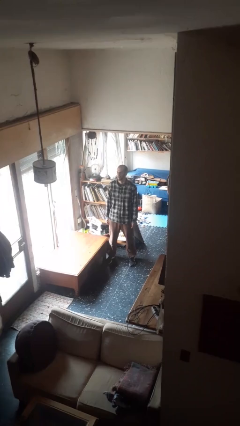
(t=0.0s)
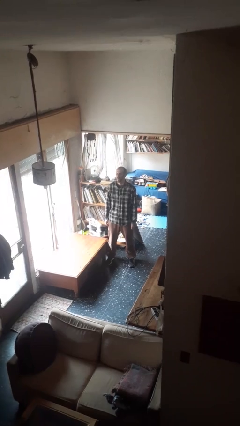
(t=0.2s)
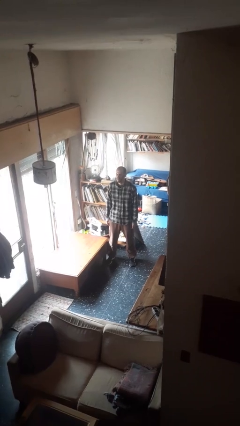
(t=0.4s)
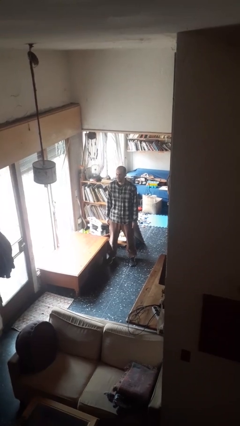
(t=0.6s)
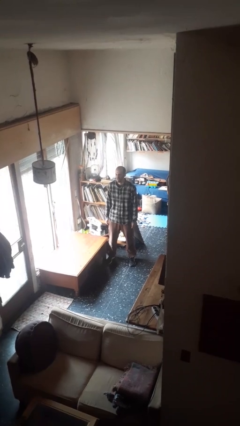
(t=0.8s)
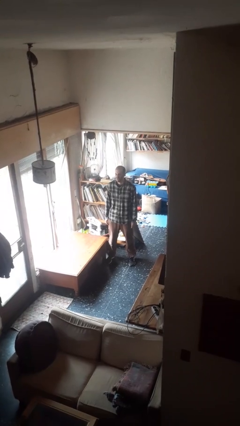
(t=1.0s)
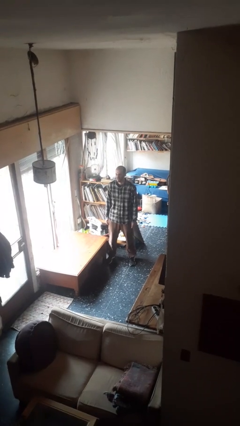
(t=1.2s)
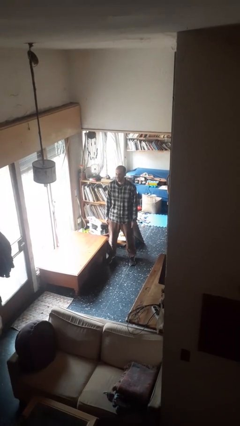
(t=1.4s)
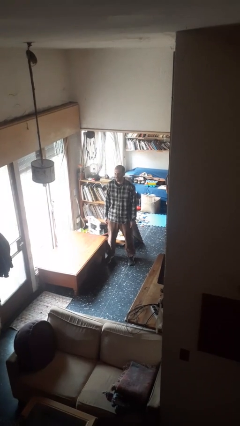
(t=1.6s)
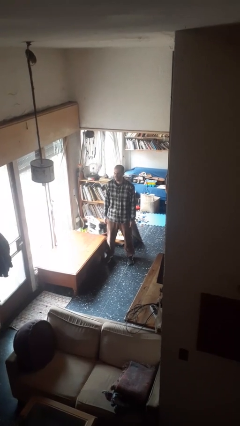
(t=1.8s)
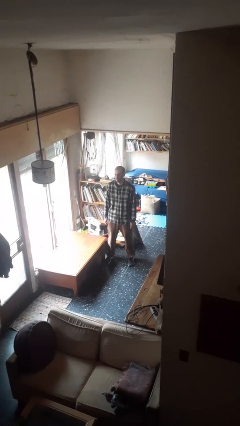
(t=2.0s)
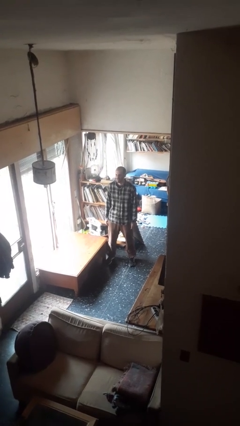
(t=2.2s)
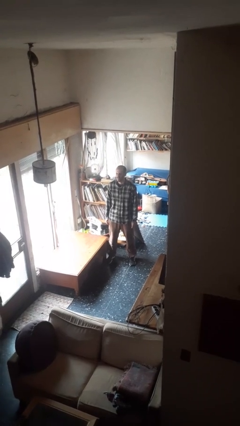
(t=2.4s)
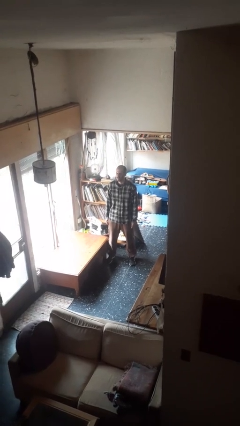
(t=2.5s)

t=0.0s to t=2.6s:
person sticks out tongue

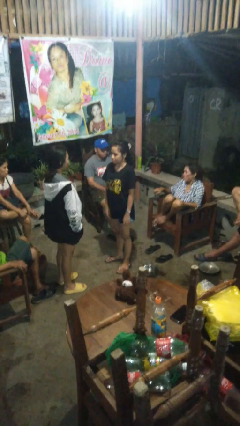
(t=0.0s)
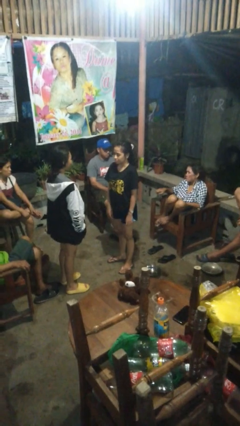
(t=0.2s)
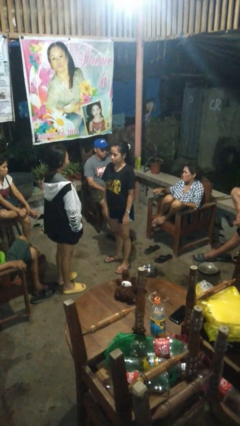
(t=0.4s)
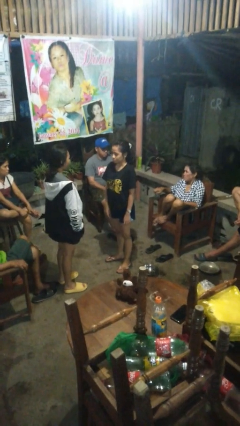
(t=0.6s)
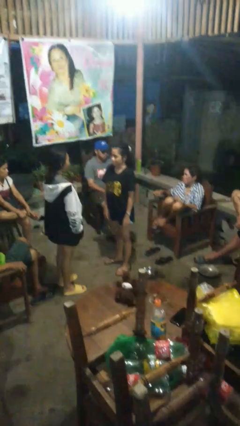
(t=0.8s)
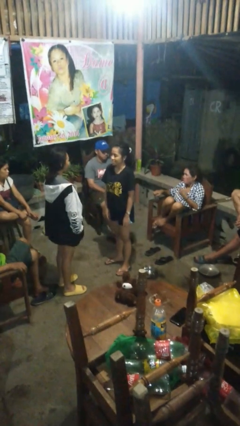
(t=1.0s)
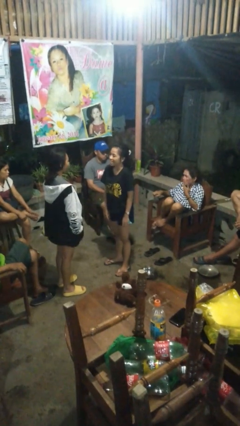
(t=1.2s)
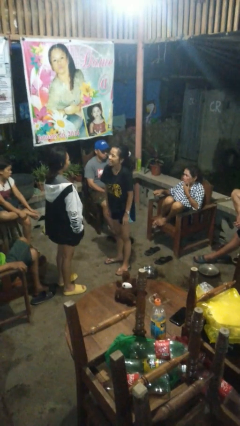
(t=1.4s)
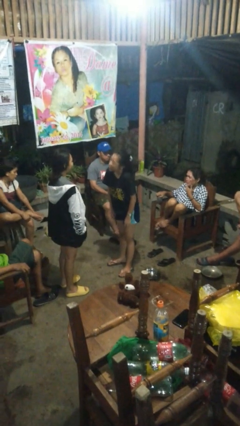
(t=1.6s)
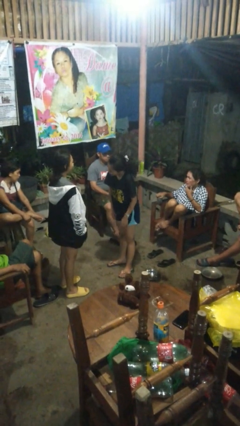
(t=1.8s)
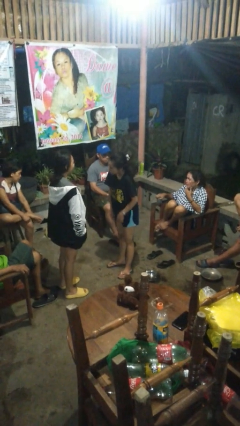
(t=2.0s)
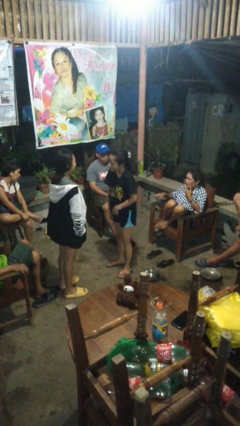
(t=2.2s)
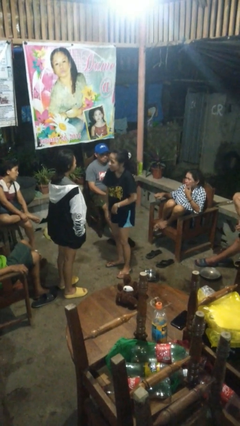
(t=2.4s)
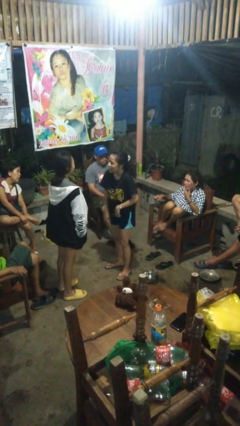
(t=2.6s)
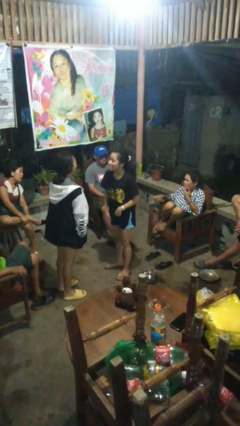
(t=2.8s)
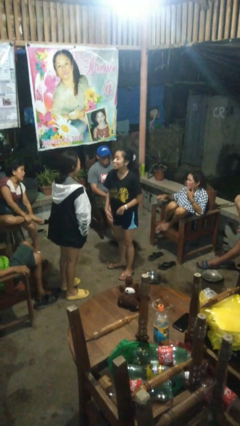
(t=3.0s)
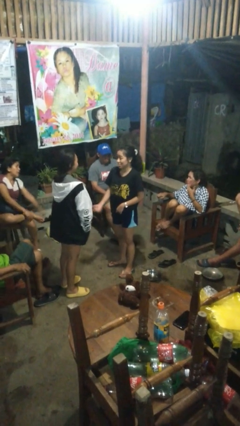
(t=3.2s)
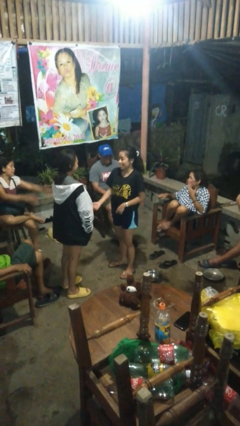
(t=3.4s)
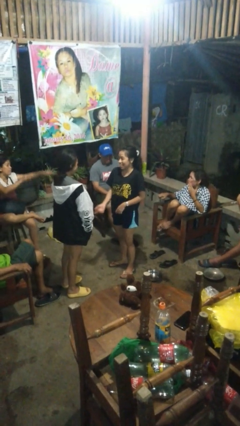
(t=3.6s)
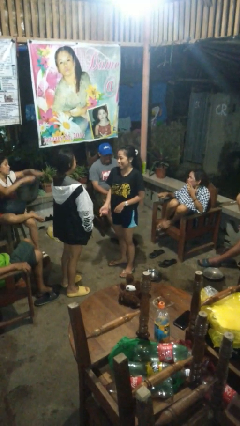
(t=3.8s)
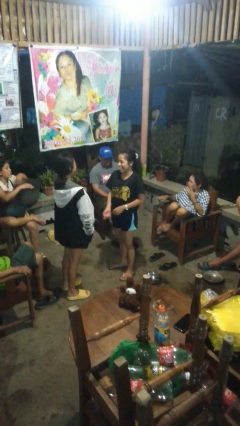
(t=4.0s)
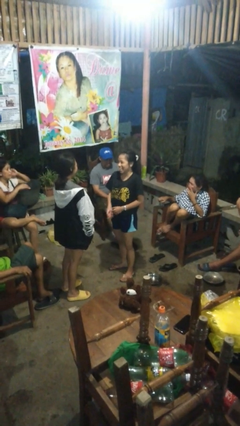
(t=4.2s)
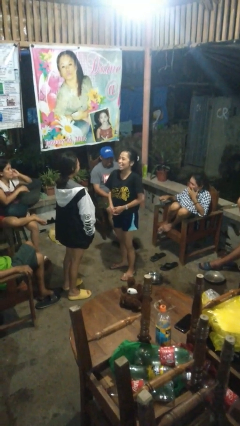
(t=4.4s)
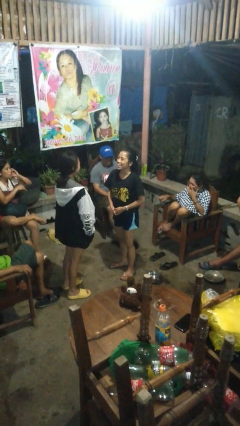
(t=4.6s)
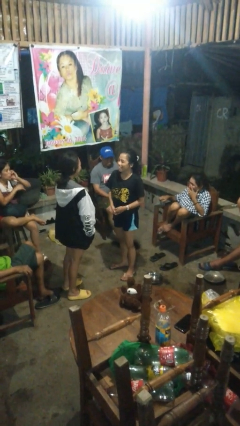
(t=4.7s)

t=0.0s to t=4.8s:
person laughs with person

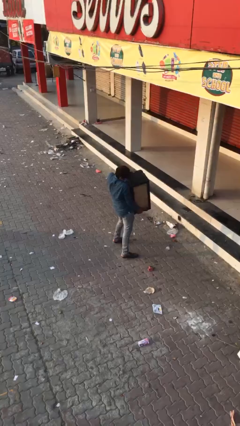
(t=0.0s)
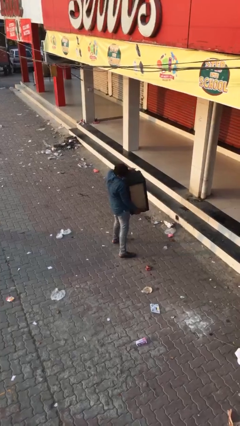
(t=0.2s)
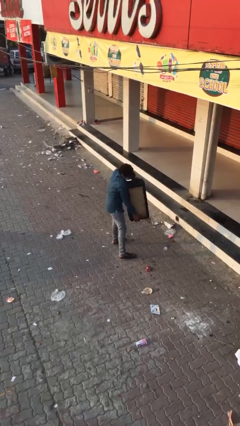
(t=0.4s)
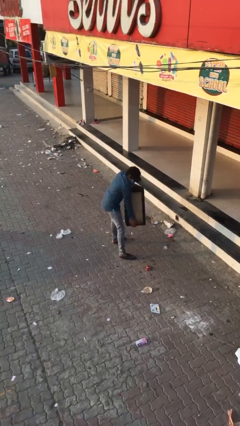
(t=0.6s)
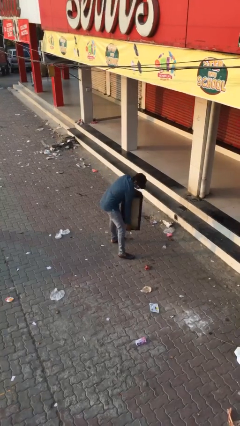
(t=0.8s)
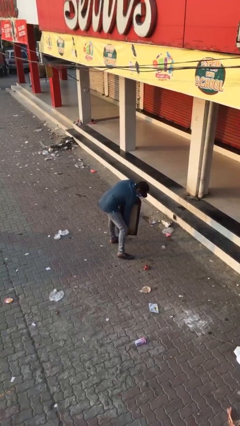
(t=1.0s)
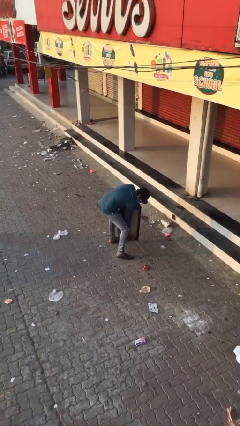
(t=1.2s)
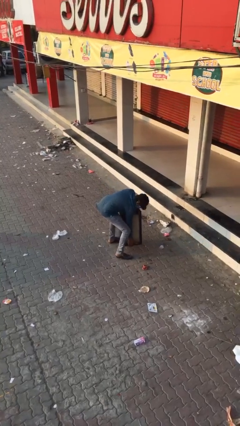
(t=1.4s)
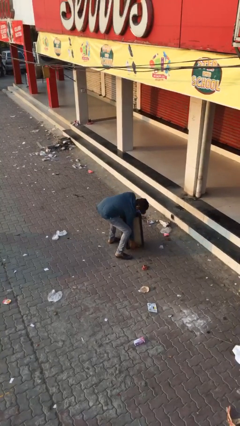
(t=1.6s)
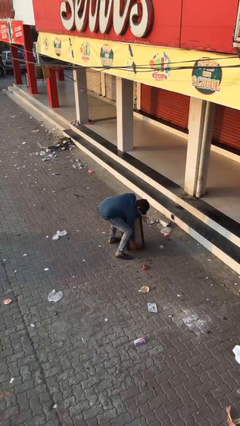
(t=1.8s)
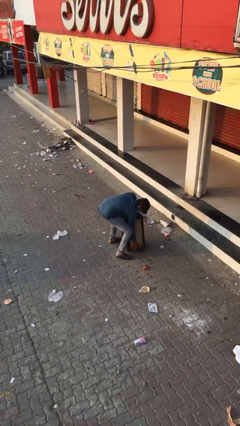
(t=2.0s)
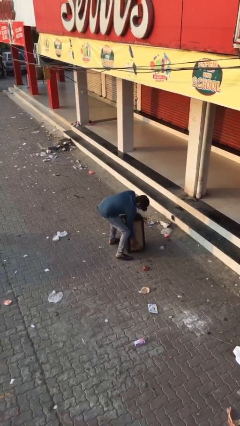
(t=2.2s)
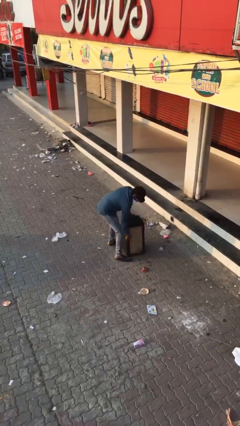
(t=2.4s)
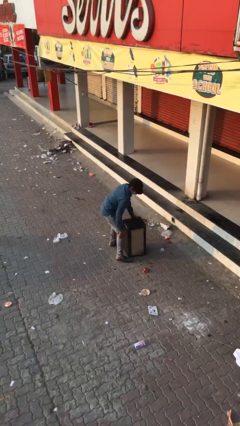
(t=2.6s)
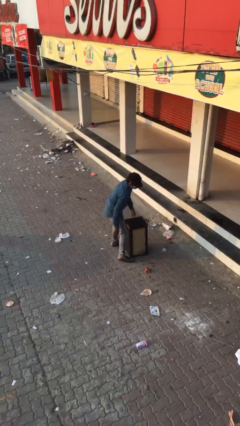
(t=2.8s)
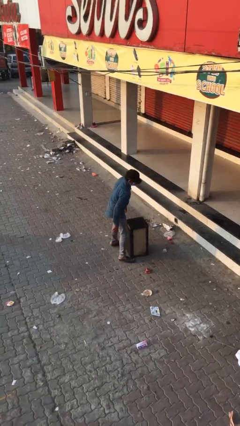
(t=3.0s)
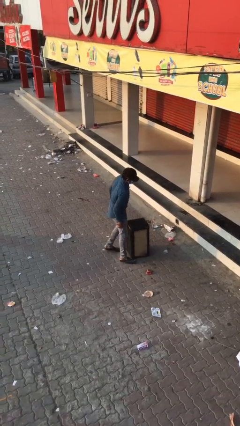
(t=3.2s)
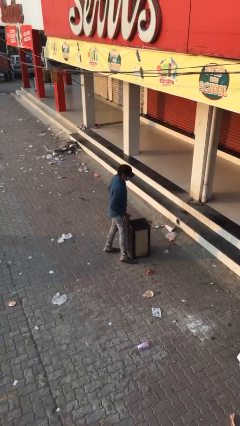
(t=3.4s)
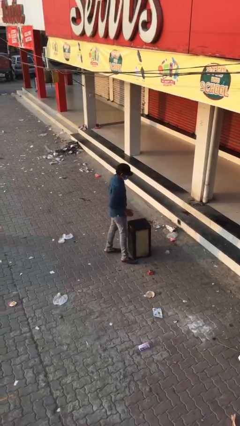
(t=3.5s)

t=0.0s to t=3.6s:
person puts down object on floor

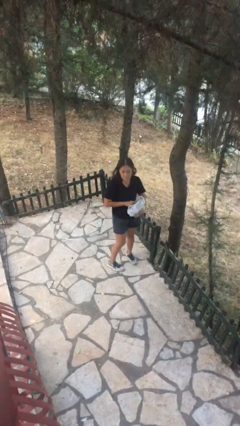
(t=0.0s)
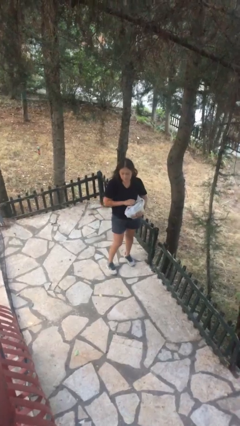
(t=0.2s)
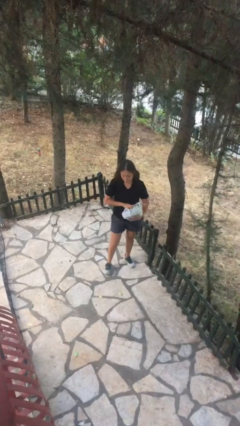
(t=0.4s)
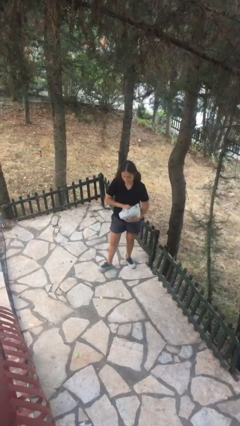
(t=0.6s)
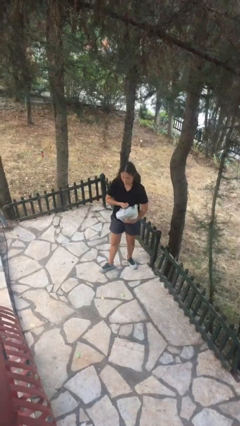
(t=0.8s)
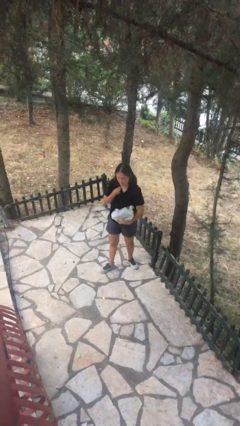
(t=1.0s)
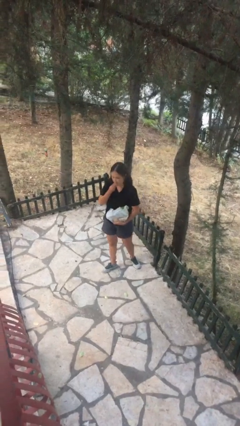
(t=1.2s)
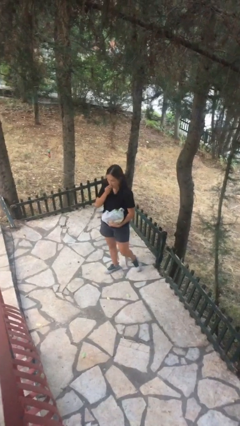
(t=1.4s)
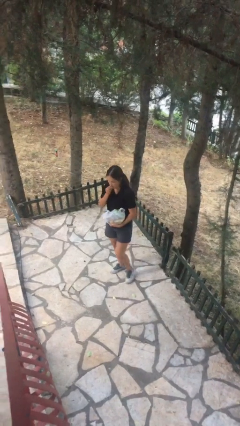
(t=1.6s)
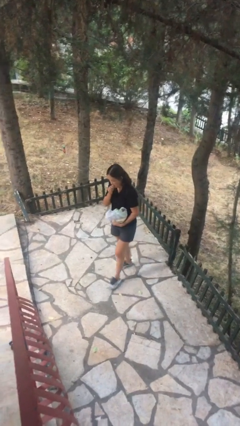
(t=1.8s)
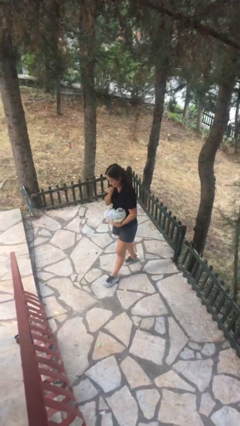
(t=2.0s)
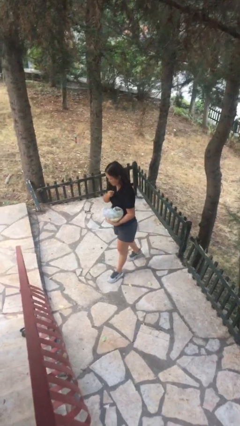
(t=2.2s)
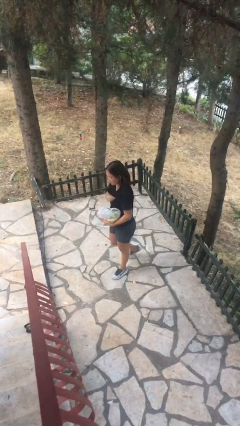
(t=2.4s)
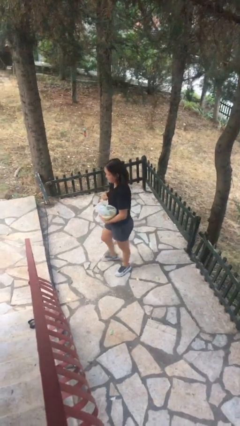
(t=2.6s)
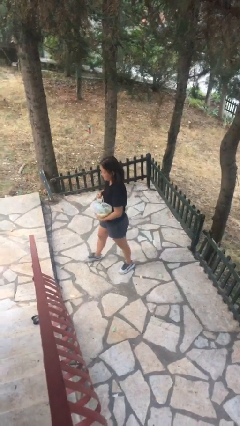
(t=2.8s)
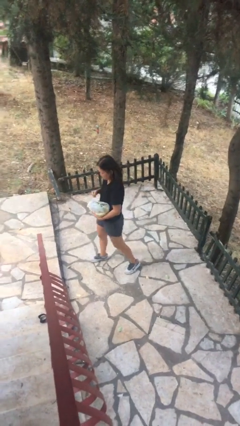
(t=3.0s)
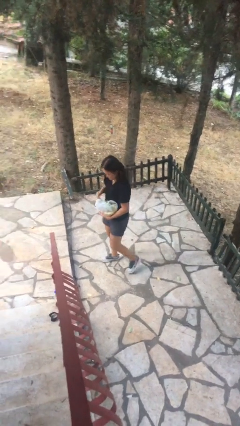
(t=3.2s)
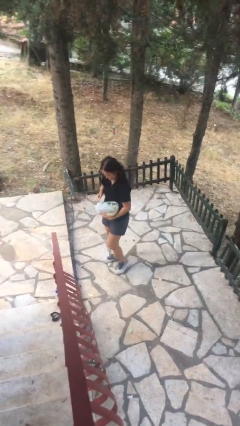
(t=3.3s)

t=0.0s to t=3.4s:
person eats snack from bag

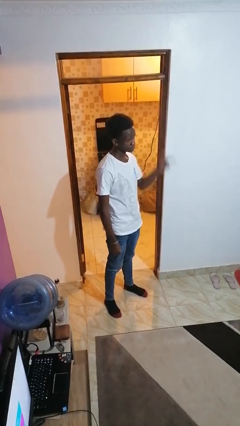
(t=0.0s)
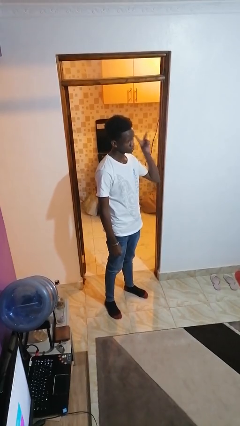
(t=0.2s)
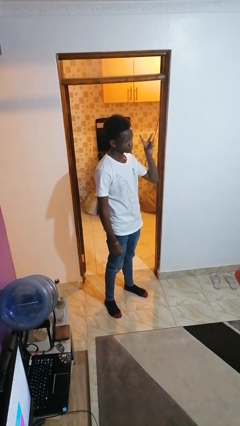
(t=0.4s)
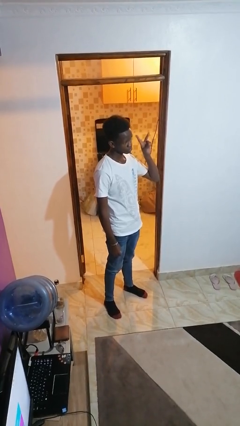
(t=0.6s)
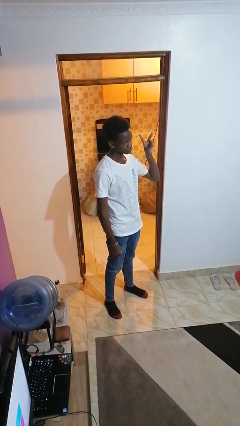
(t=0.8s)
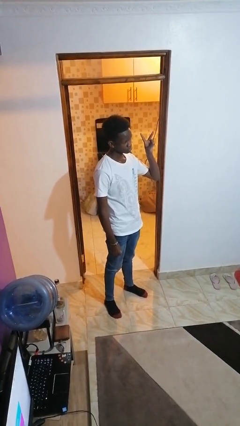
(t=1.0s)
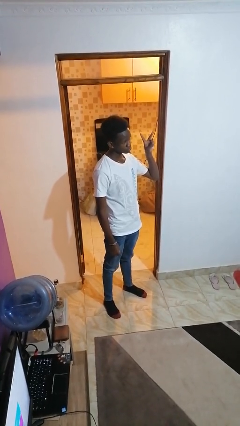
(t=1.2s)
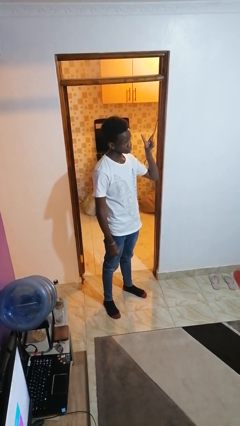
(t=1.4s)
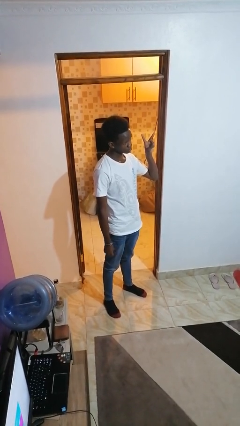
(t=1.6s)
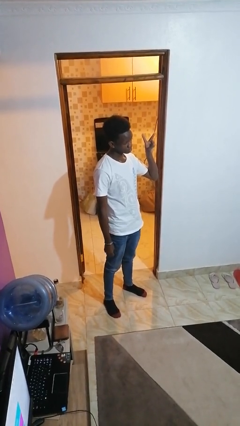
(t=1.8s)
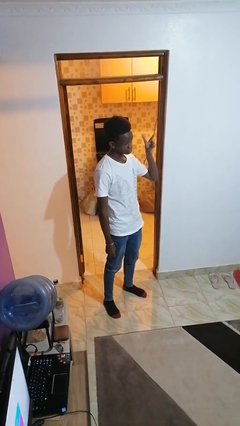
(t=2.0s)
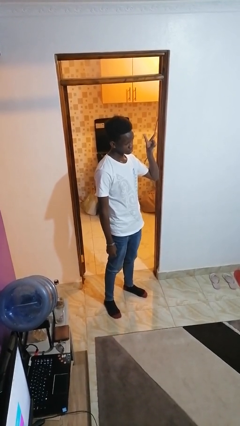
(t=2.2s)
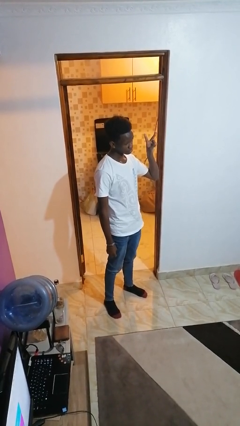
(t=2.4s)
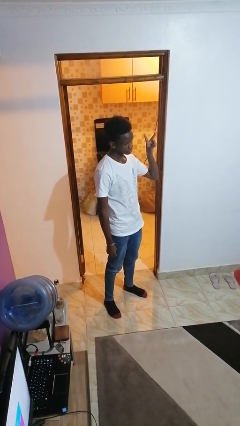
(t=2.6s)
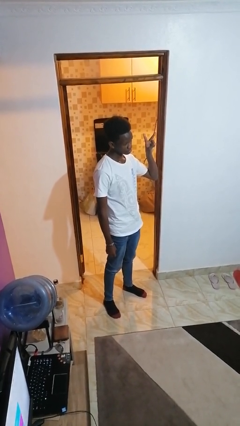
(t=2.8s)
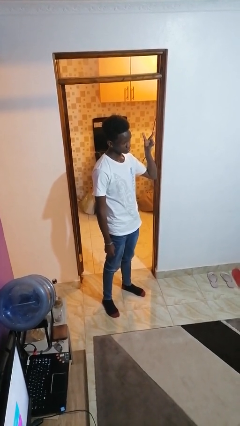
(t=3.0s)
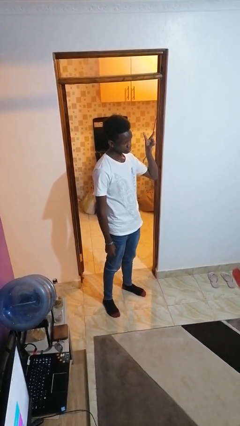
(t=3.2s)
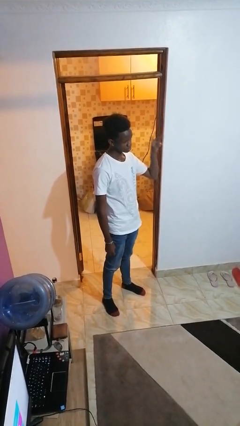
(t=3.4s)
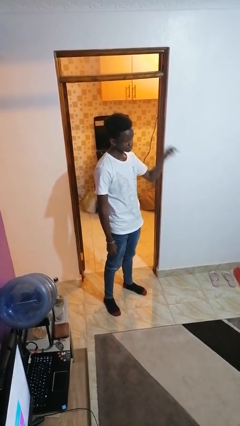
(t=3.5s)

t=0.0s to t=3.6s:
person gestures peace
